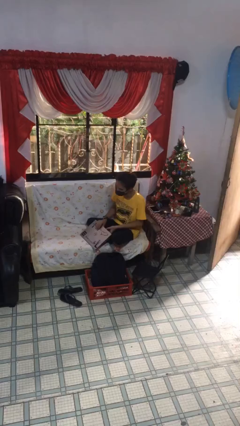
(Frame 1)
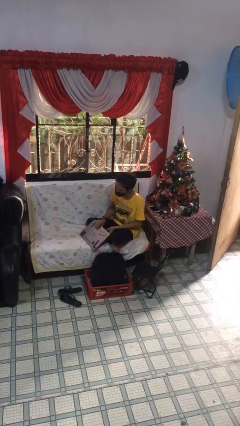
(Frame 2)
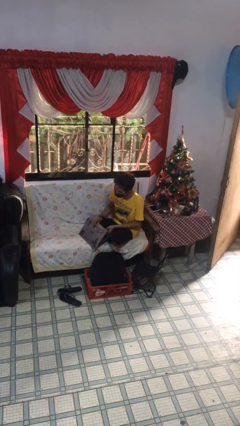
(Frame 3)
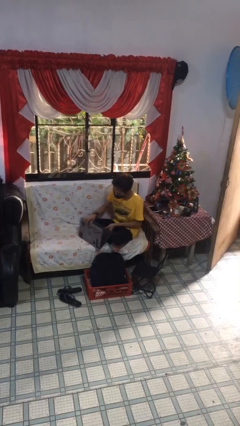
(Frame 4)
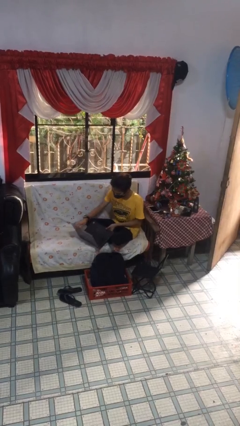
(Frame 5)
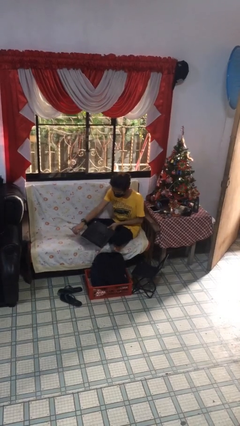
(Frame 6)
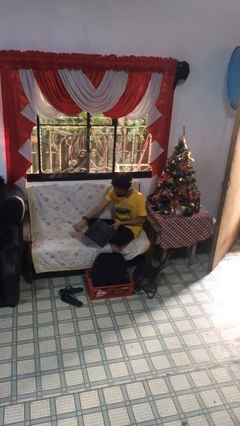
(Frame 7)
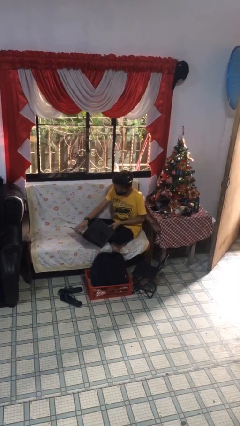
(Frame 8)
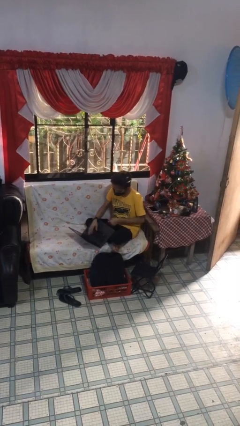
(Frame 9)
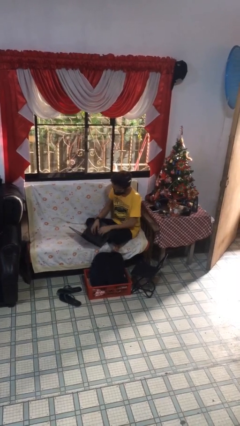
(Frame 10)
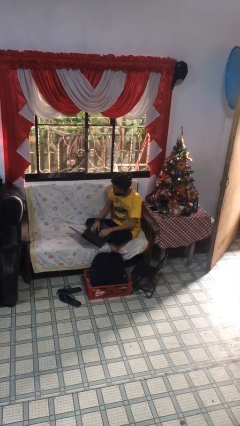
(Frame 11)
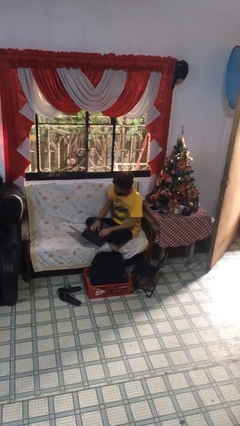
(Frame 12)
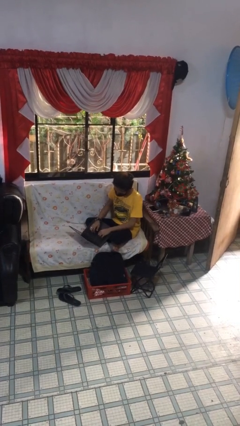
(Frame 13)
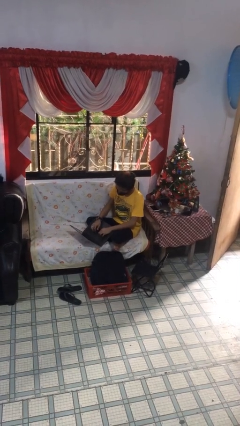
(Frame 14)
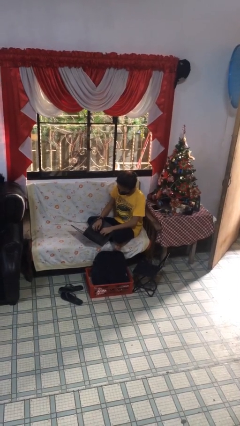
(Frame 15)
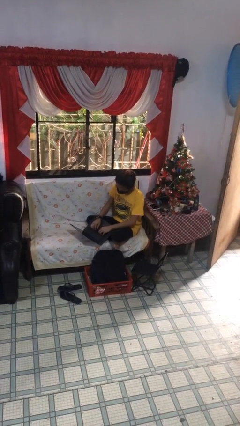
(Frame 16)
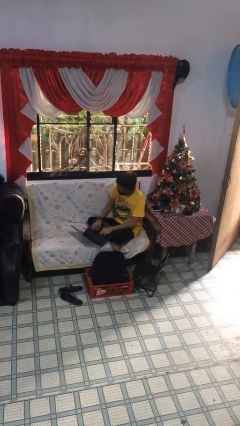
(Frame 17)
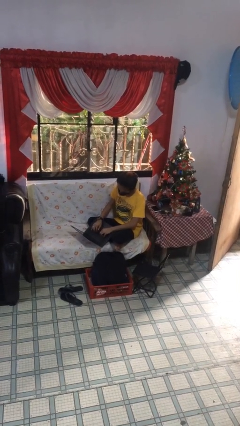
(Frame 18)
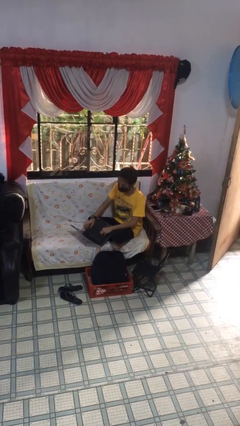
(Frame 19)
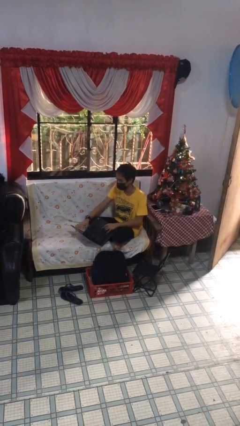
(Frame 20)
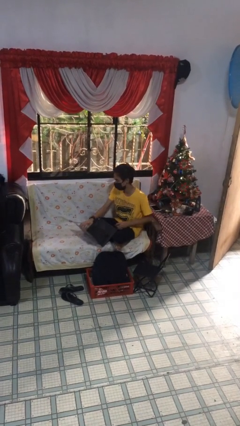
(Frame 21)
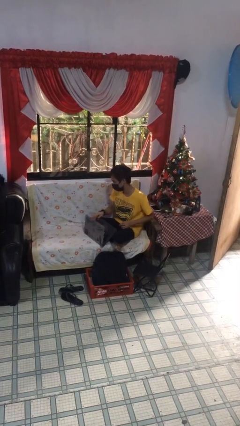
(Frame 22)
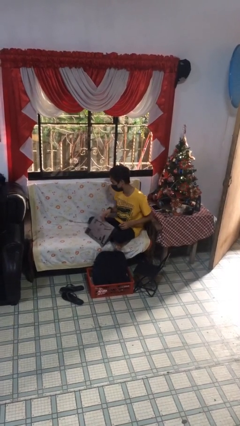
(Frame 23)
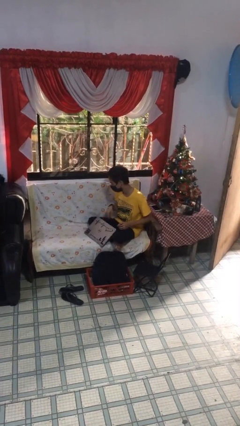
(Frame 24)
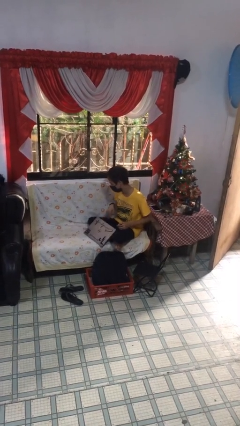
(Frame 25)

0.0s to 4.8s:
person interacts with laptop

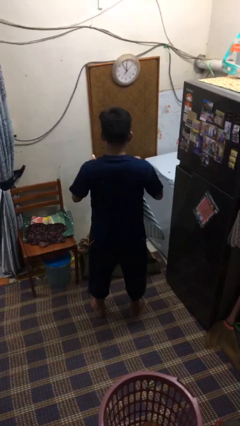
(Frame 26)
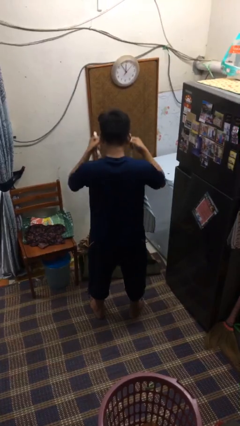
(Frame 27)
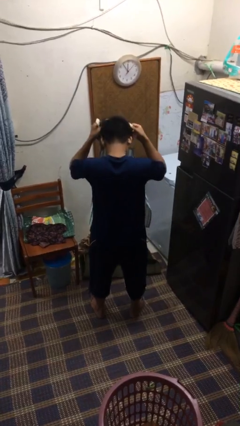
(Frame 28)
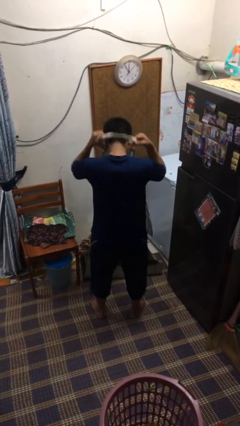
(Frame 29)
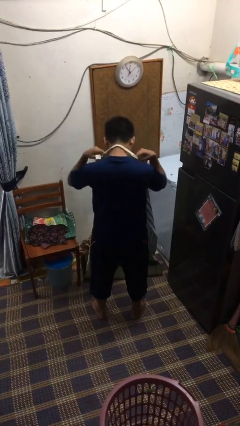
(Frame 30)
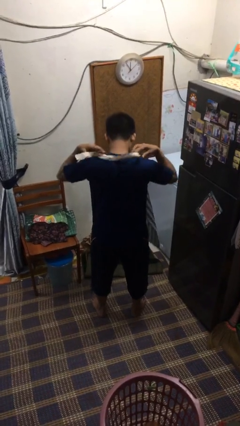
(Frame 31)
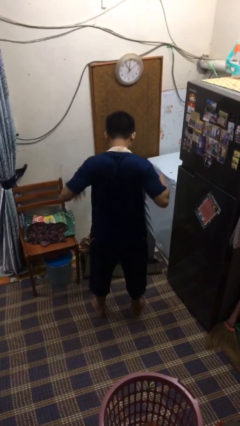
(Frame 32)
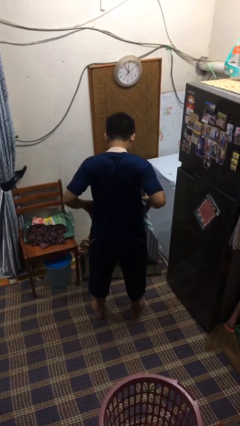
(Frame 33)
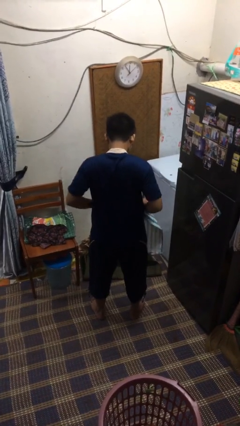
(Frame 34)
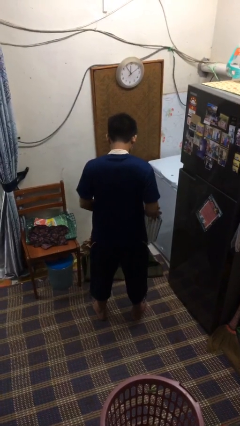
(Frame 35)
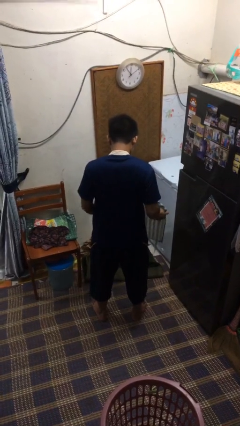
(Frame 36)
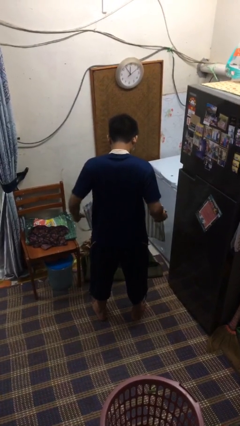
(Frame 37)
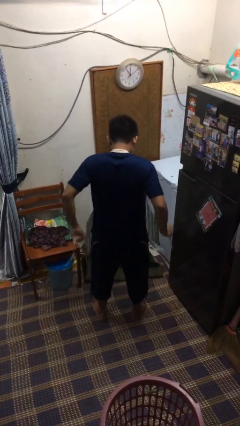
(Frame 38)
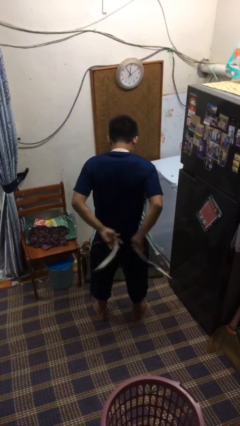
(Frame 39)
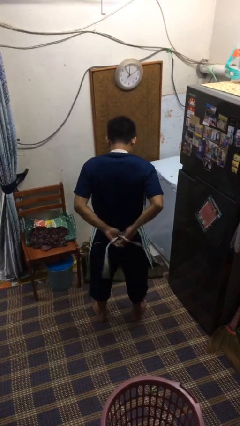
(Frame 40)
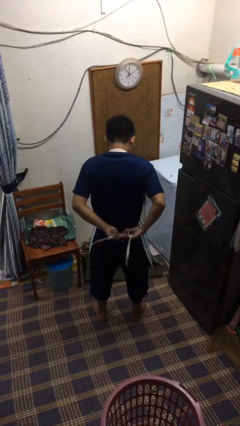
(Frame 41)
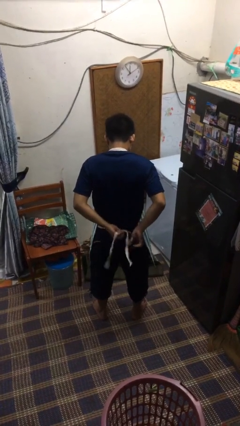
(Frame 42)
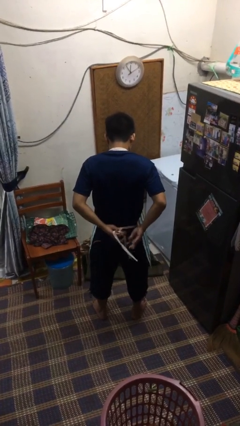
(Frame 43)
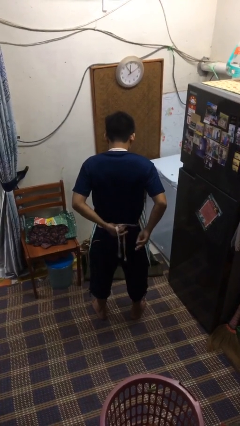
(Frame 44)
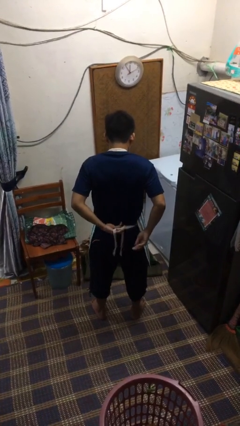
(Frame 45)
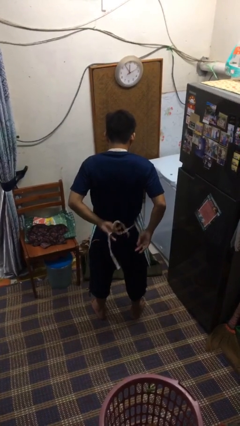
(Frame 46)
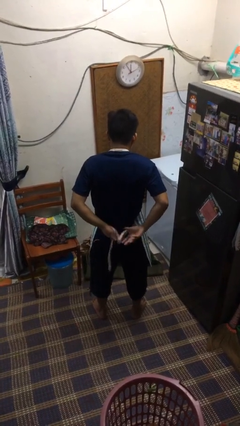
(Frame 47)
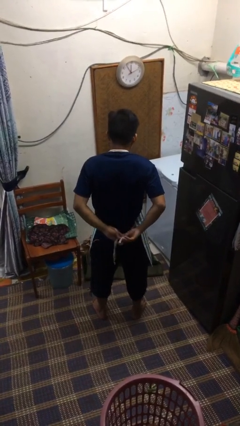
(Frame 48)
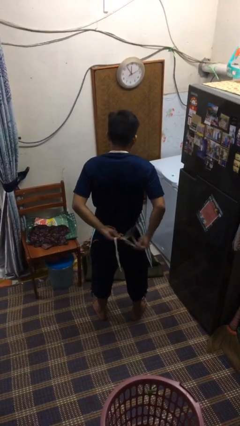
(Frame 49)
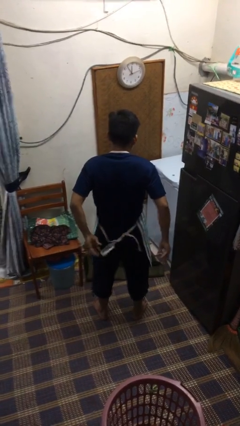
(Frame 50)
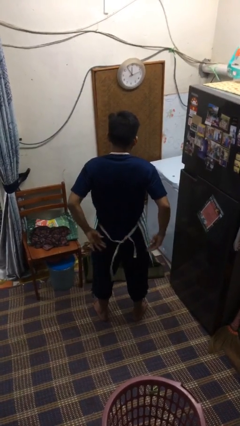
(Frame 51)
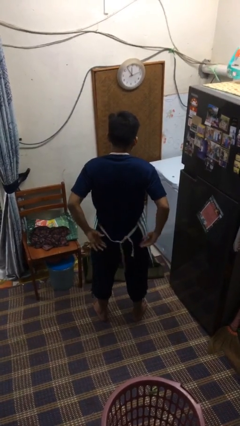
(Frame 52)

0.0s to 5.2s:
person puts on apron

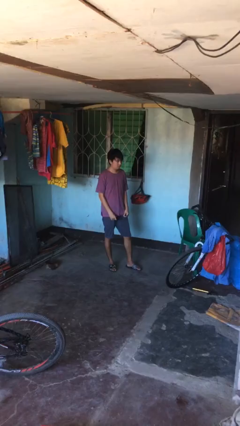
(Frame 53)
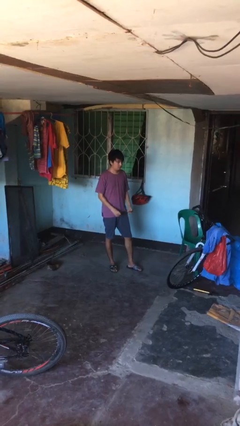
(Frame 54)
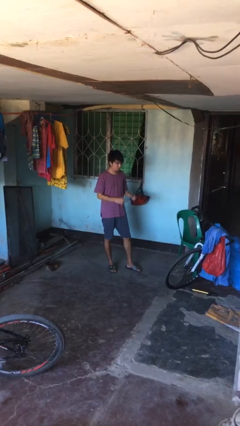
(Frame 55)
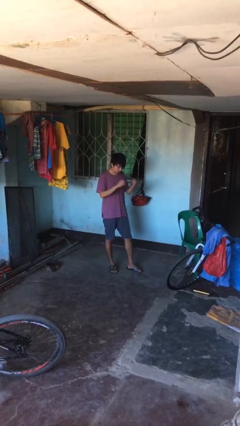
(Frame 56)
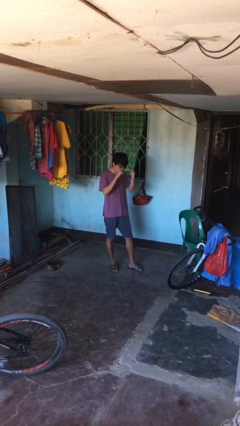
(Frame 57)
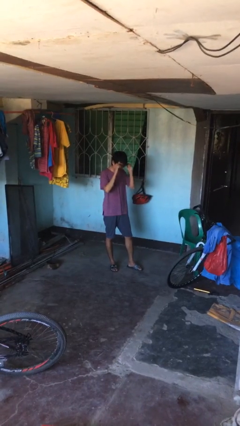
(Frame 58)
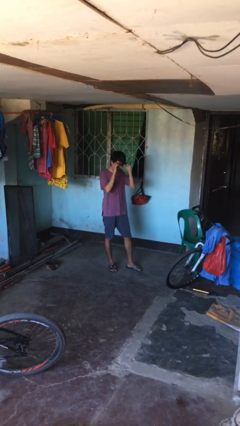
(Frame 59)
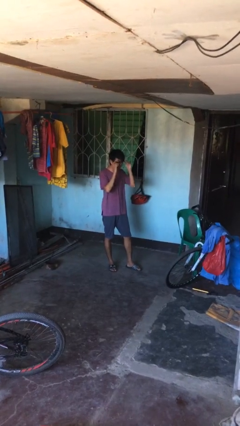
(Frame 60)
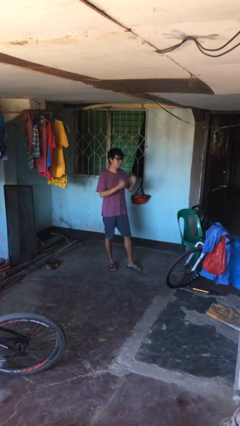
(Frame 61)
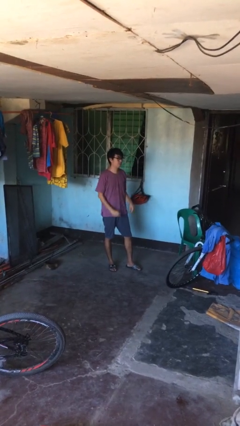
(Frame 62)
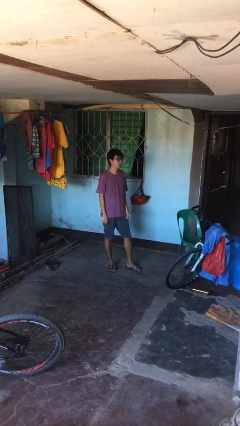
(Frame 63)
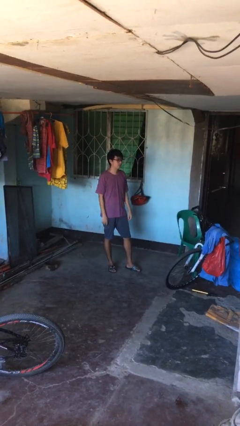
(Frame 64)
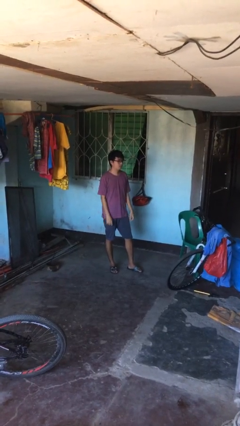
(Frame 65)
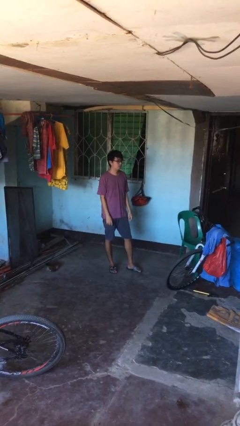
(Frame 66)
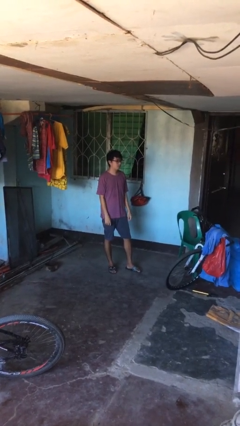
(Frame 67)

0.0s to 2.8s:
person puts on glasses

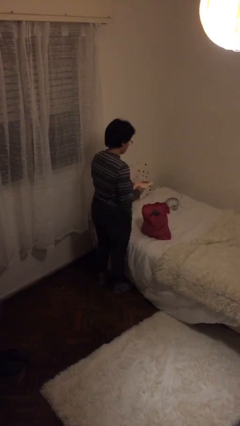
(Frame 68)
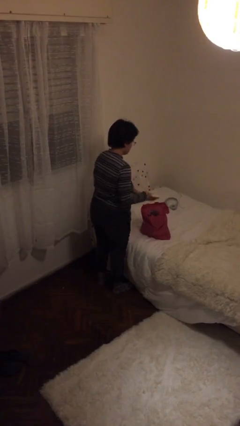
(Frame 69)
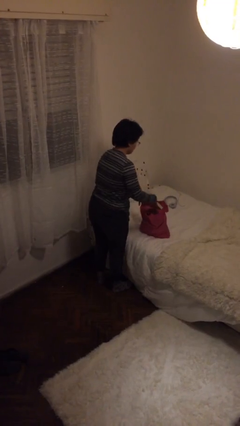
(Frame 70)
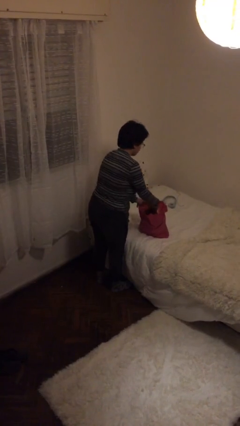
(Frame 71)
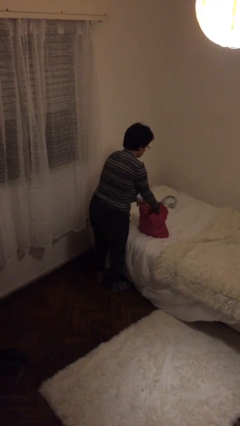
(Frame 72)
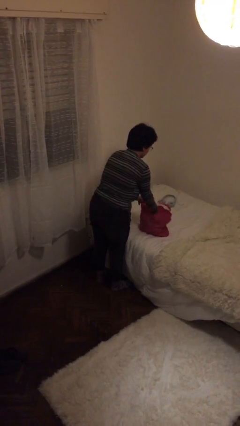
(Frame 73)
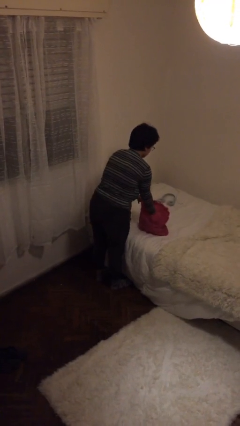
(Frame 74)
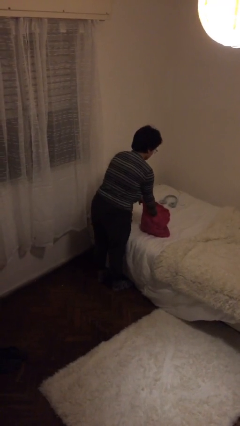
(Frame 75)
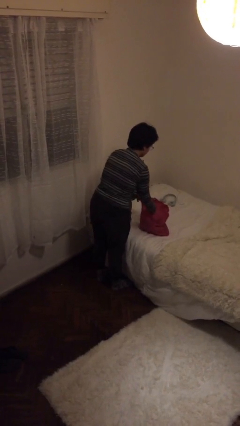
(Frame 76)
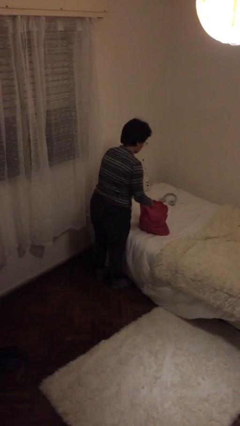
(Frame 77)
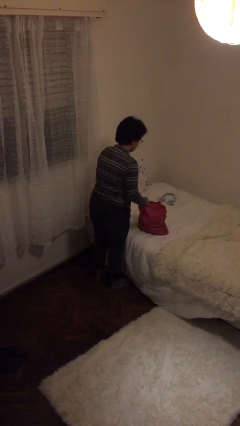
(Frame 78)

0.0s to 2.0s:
person puts object into bag

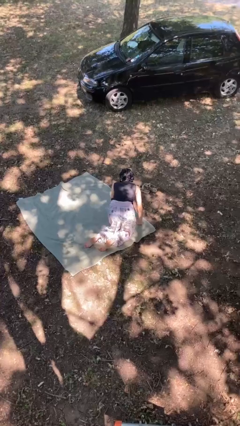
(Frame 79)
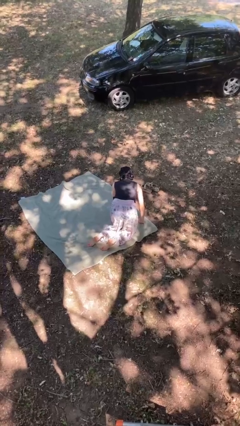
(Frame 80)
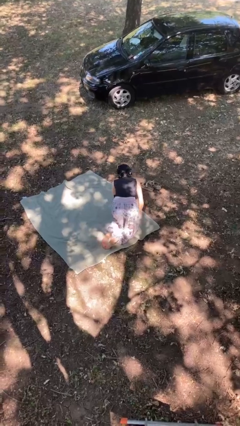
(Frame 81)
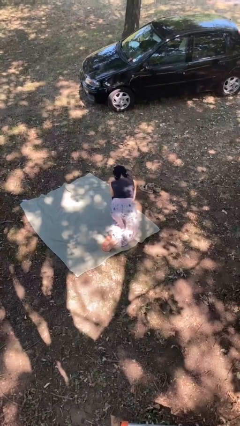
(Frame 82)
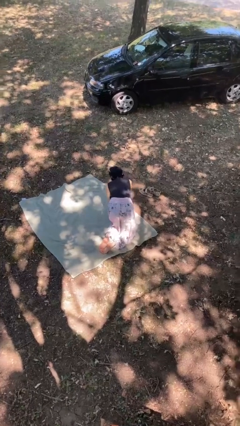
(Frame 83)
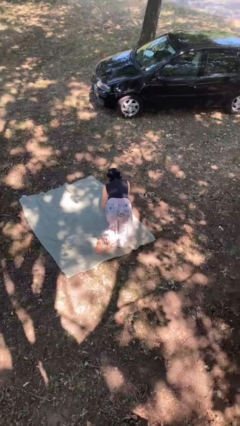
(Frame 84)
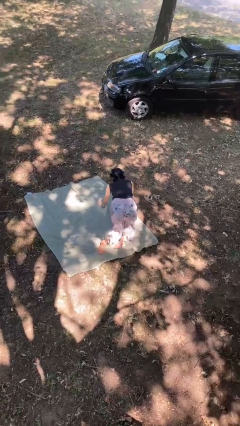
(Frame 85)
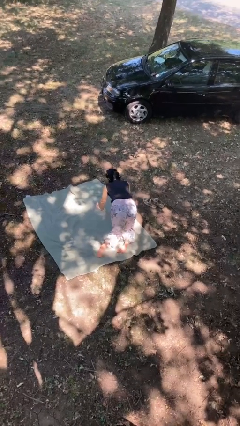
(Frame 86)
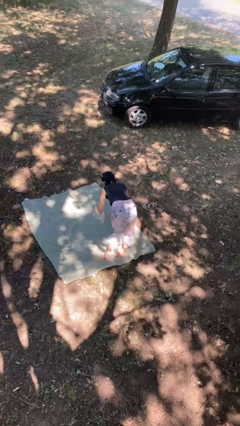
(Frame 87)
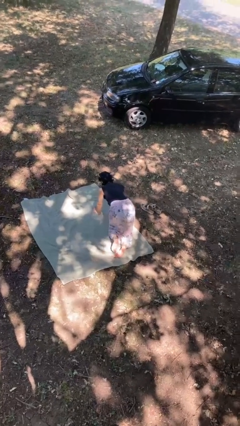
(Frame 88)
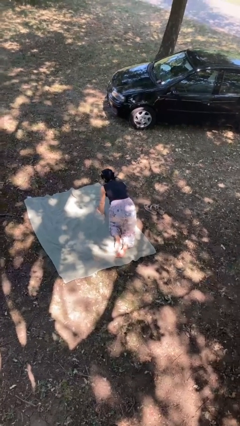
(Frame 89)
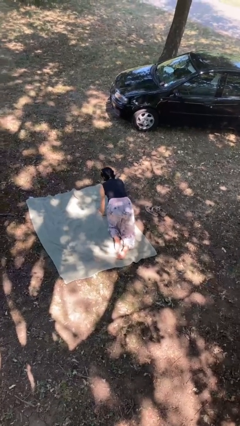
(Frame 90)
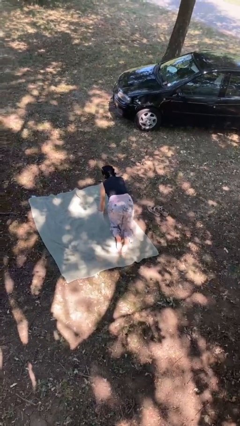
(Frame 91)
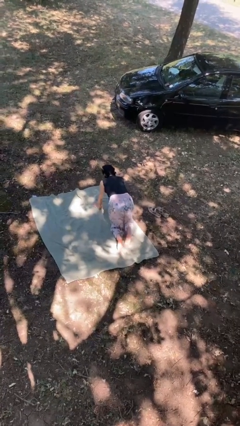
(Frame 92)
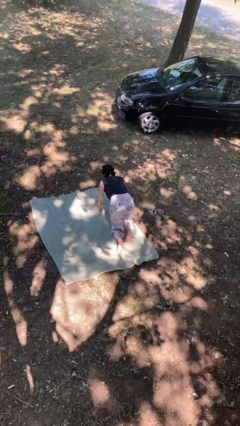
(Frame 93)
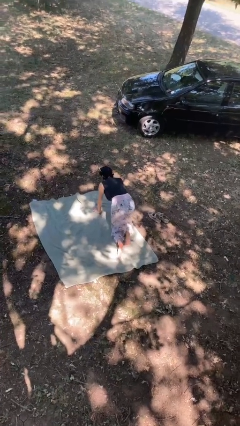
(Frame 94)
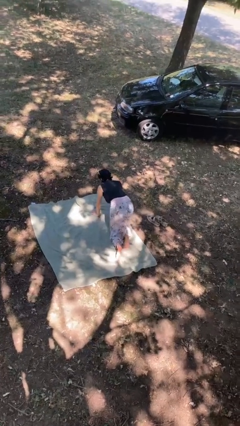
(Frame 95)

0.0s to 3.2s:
person crawls
